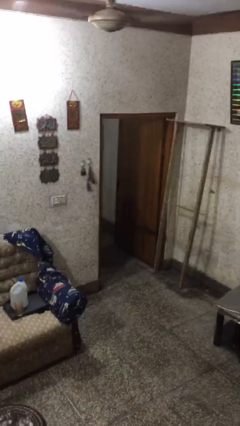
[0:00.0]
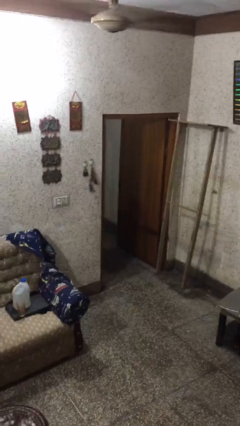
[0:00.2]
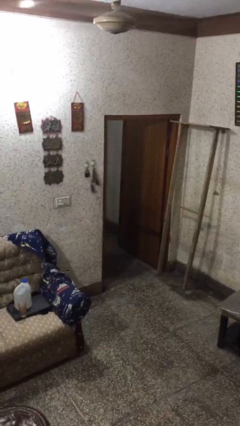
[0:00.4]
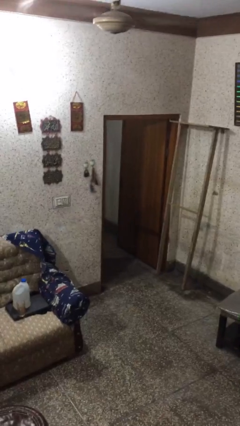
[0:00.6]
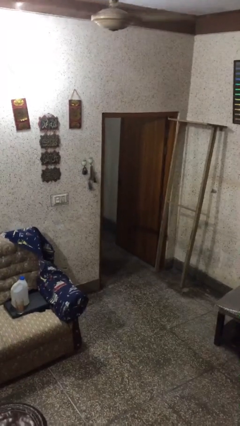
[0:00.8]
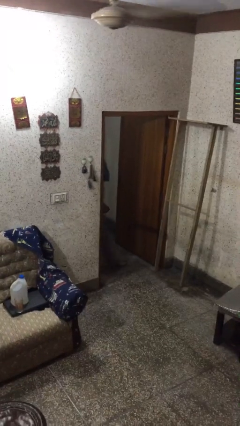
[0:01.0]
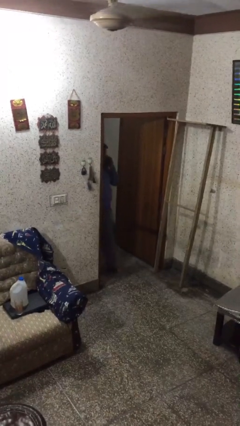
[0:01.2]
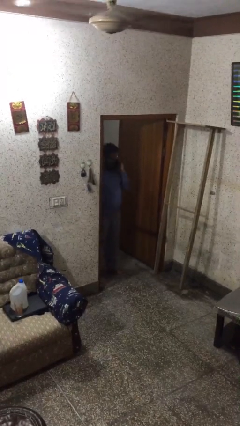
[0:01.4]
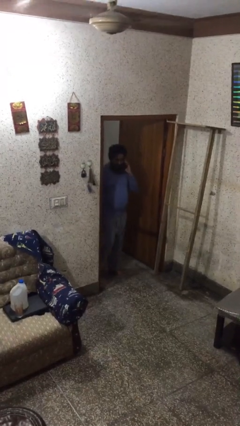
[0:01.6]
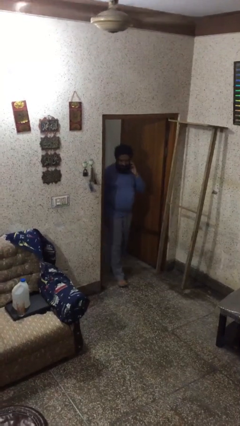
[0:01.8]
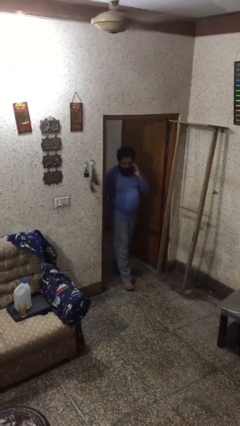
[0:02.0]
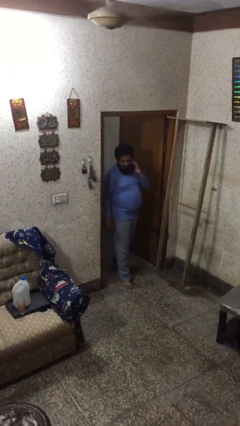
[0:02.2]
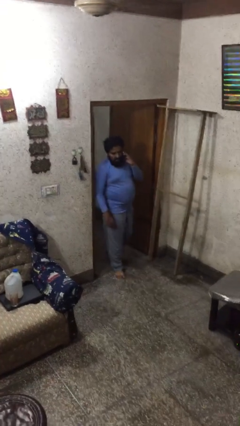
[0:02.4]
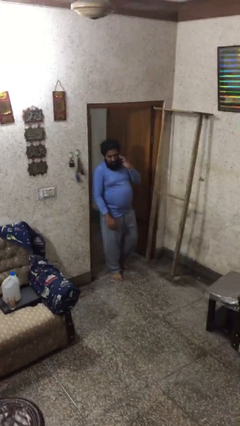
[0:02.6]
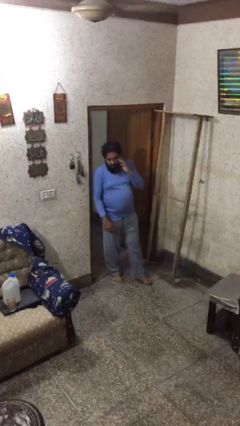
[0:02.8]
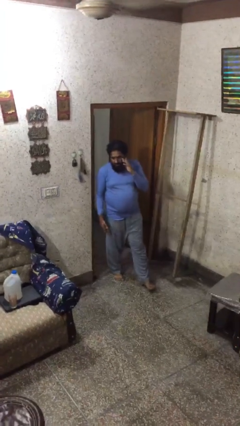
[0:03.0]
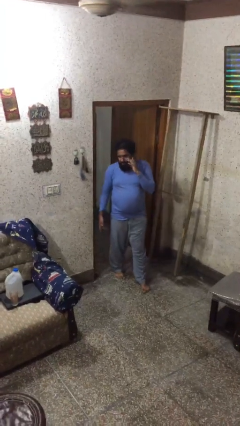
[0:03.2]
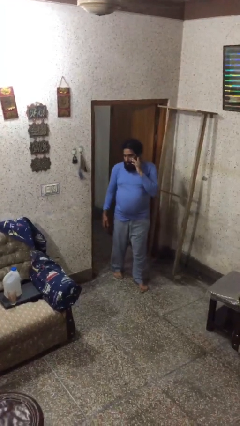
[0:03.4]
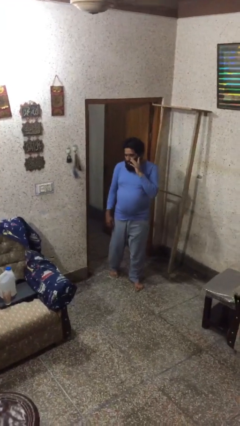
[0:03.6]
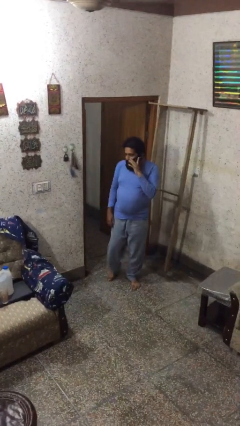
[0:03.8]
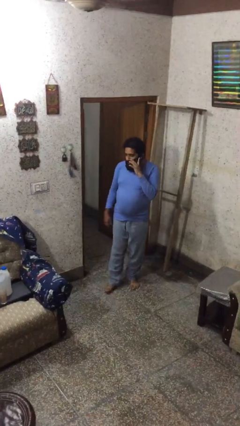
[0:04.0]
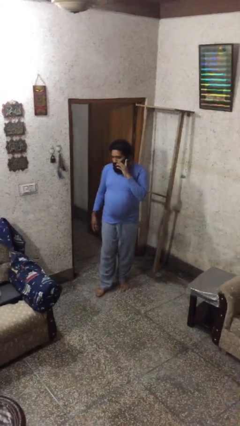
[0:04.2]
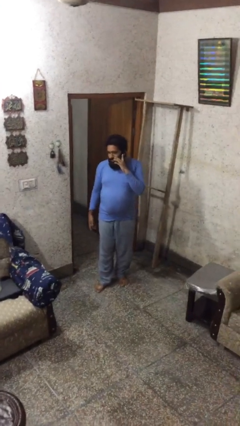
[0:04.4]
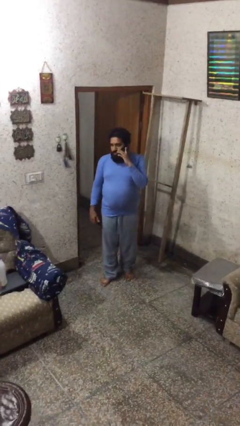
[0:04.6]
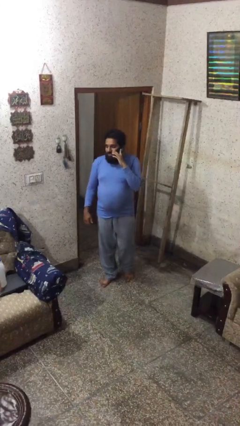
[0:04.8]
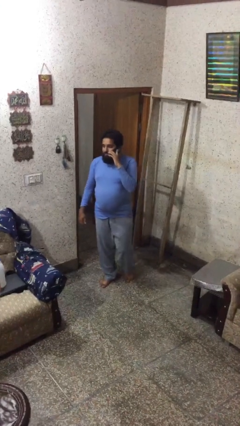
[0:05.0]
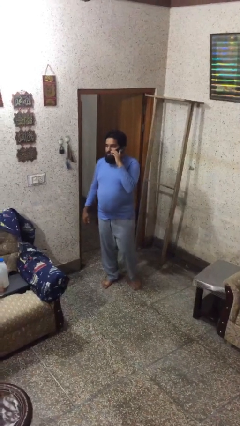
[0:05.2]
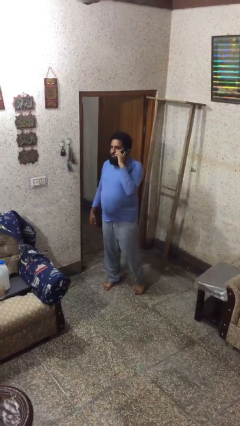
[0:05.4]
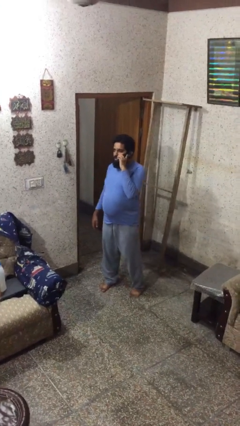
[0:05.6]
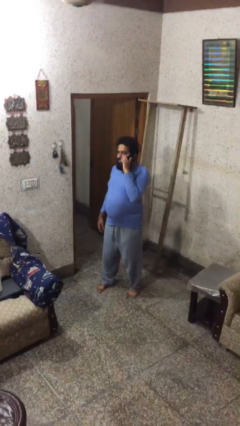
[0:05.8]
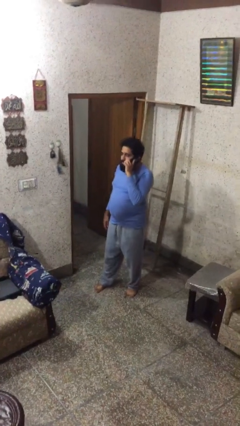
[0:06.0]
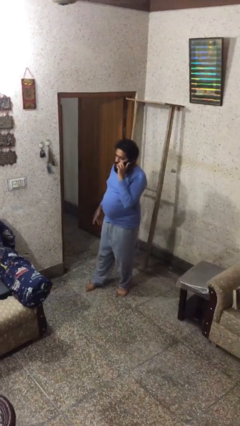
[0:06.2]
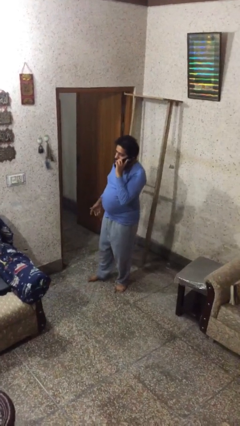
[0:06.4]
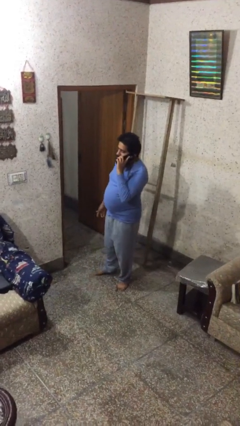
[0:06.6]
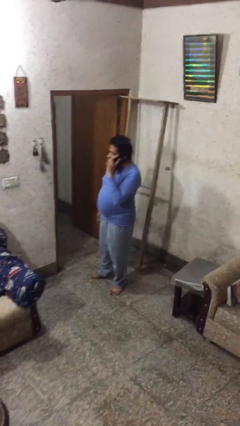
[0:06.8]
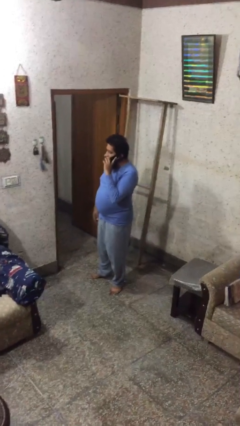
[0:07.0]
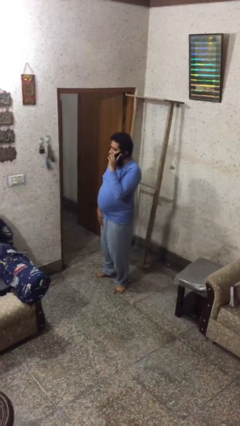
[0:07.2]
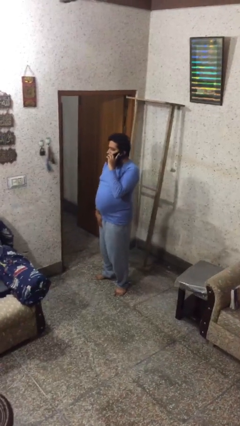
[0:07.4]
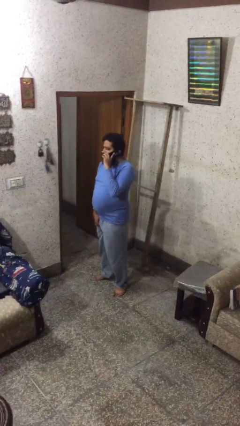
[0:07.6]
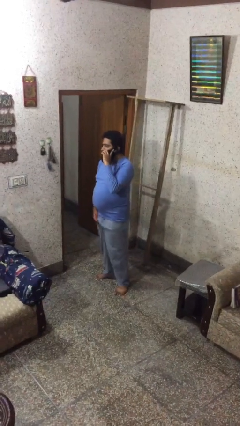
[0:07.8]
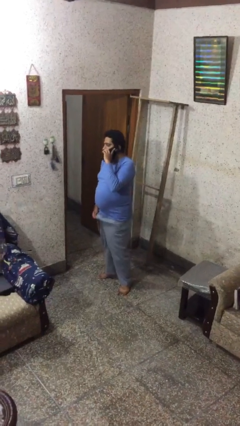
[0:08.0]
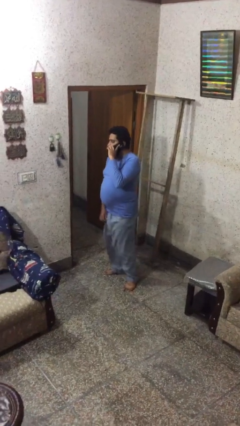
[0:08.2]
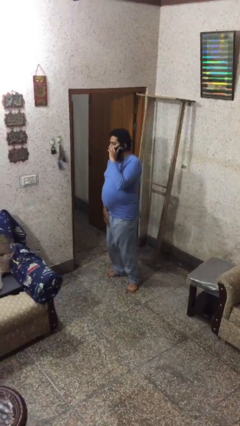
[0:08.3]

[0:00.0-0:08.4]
person enters scene through structure

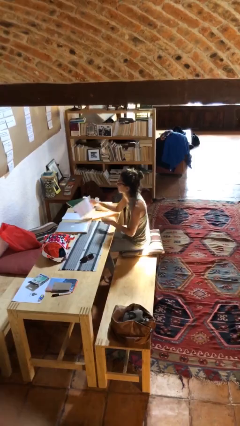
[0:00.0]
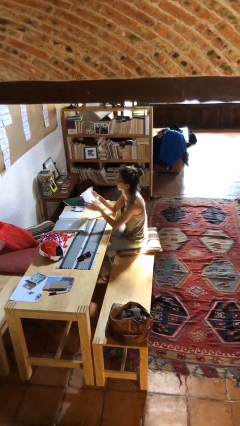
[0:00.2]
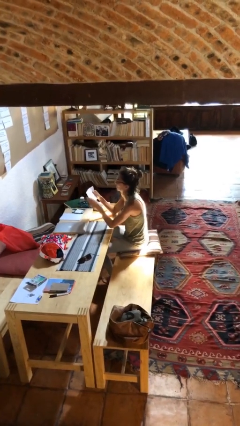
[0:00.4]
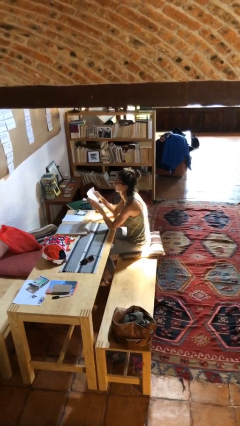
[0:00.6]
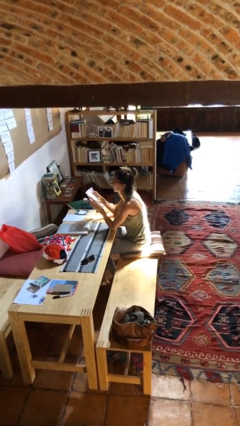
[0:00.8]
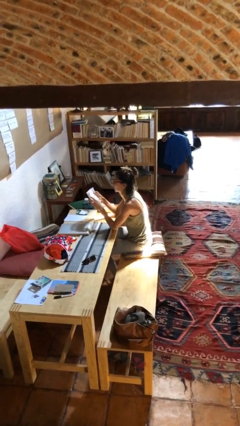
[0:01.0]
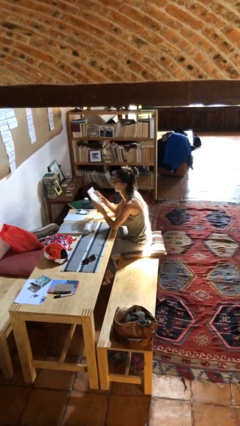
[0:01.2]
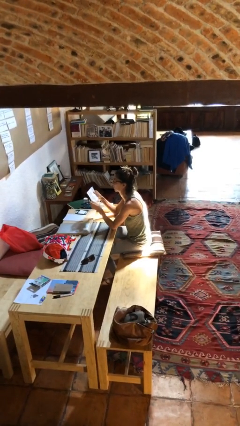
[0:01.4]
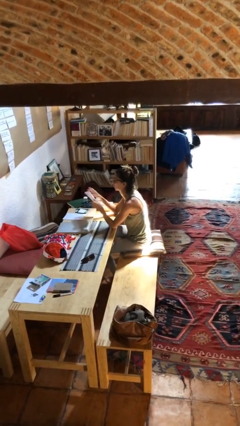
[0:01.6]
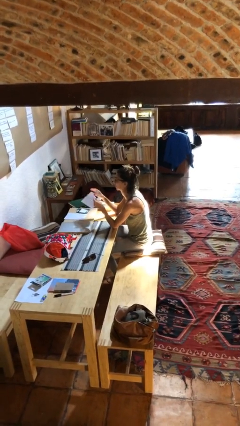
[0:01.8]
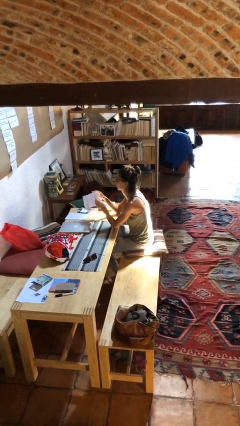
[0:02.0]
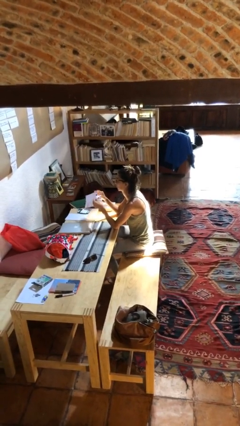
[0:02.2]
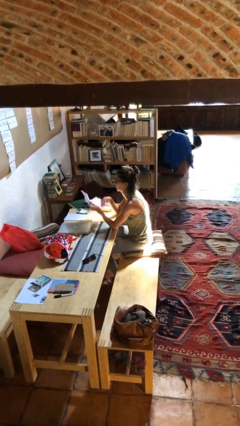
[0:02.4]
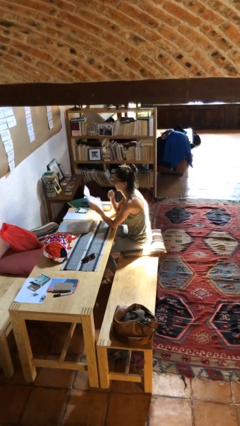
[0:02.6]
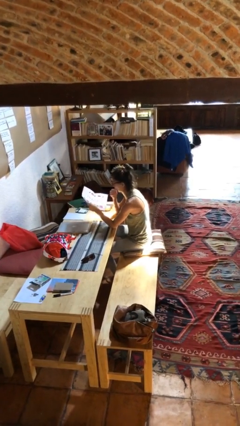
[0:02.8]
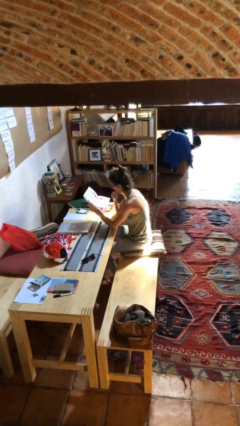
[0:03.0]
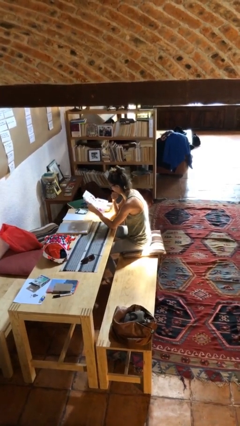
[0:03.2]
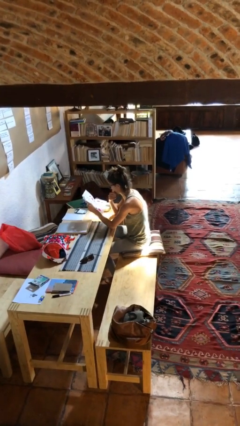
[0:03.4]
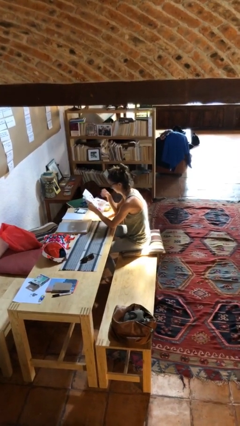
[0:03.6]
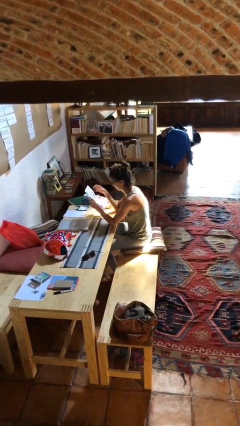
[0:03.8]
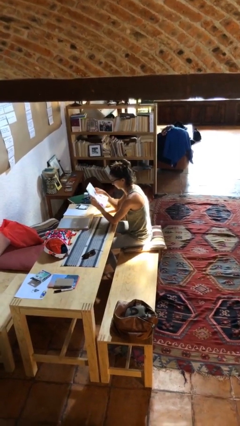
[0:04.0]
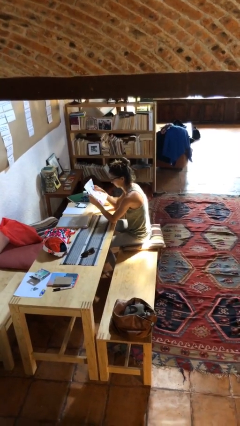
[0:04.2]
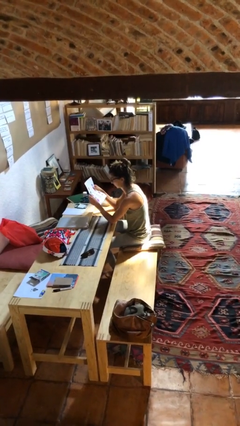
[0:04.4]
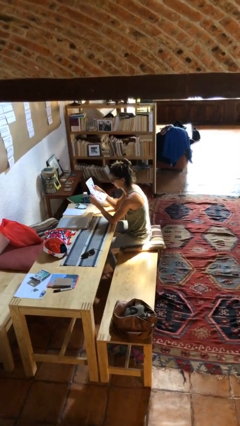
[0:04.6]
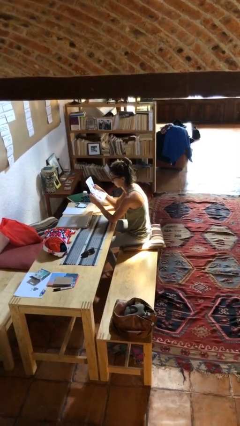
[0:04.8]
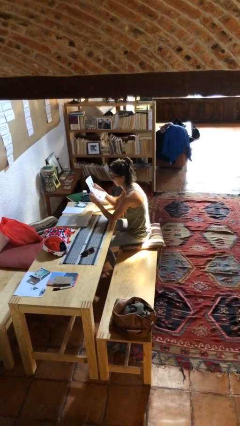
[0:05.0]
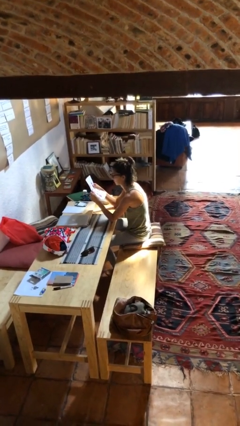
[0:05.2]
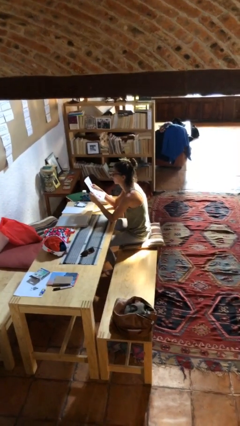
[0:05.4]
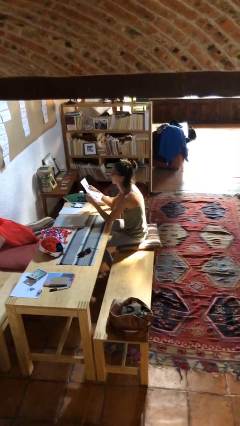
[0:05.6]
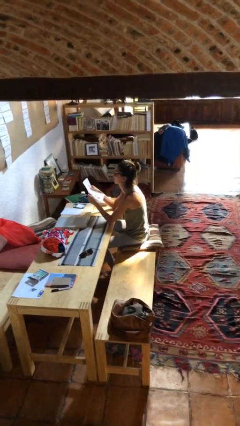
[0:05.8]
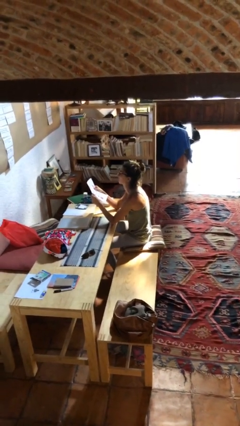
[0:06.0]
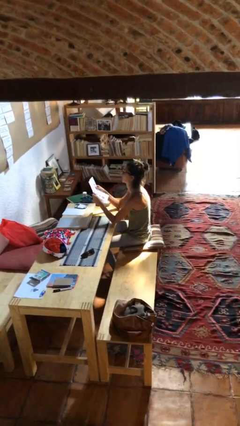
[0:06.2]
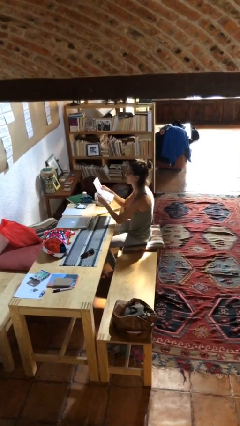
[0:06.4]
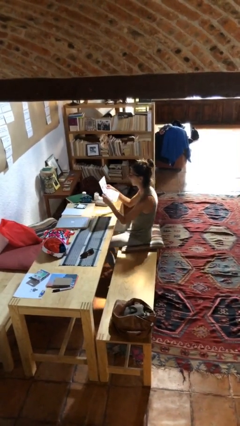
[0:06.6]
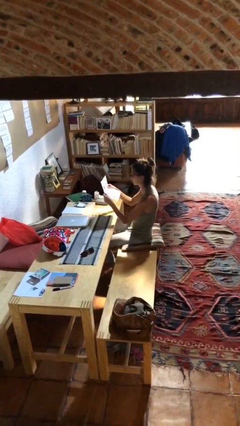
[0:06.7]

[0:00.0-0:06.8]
person reads document

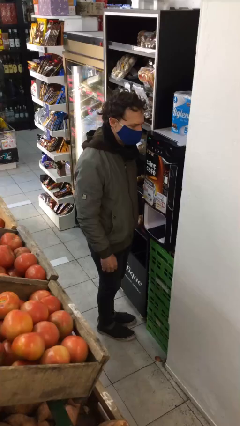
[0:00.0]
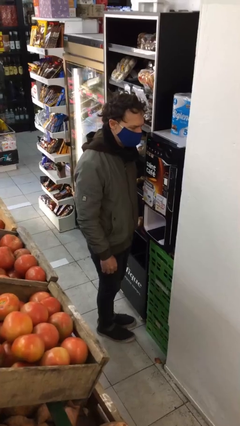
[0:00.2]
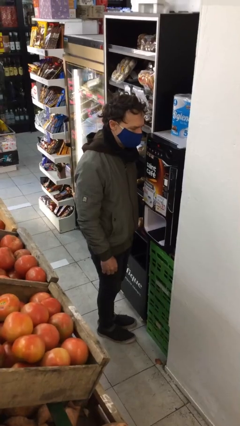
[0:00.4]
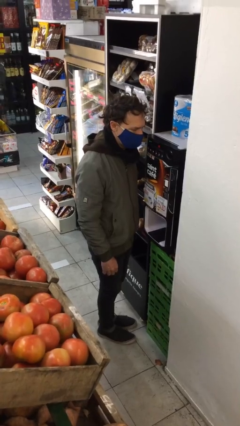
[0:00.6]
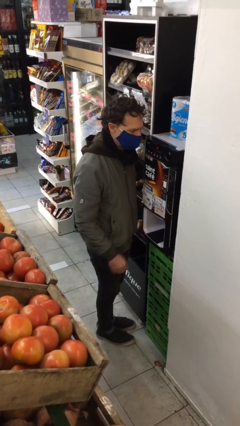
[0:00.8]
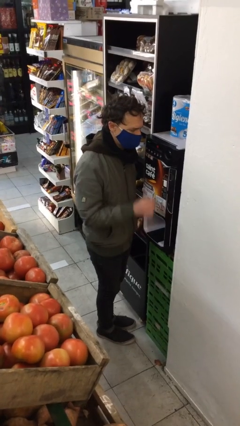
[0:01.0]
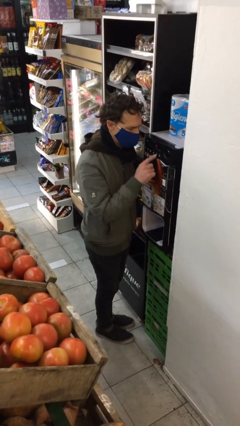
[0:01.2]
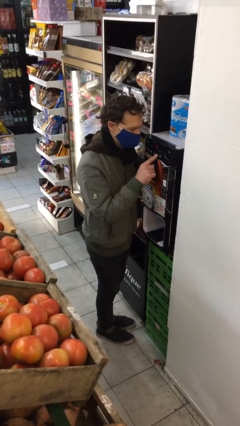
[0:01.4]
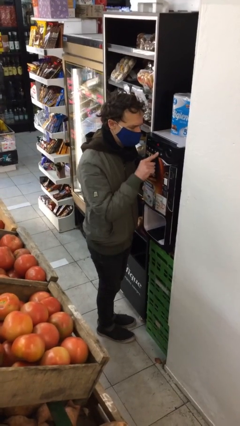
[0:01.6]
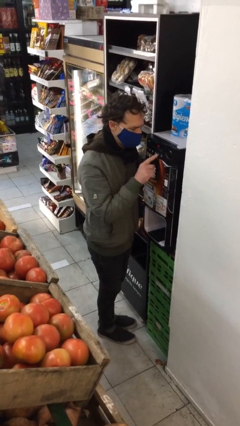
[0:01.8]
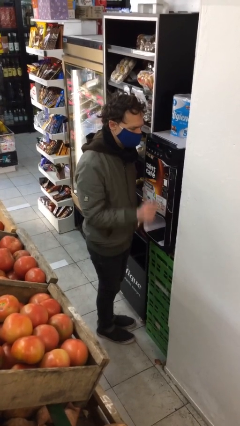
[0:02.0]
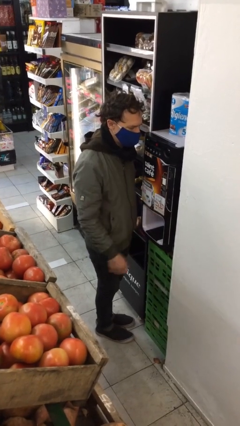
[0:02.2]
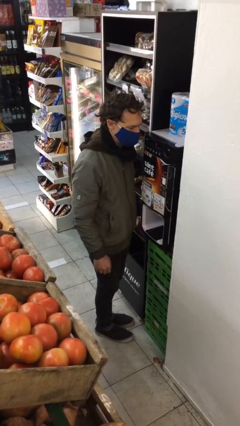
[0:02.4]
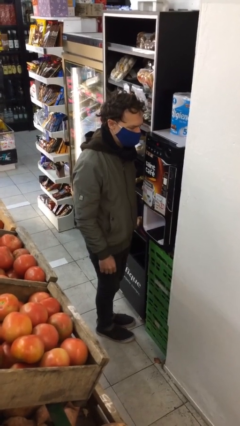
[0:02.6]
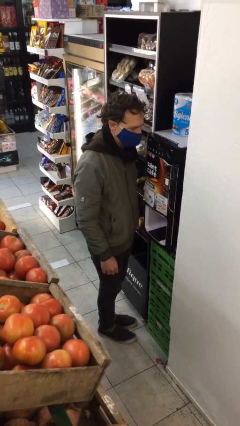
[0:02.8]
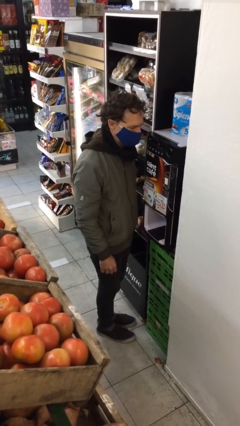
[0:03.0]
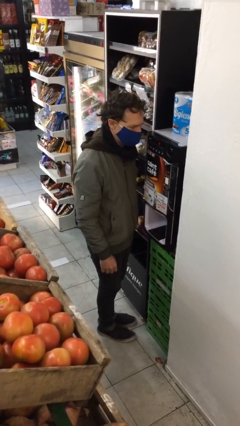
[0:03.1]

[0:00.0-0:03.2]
person purchases from machine
